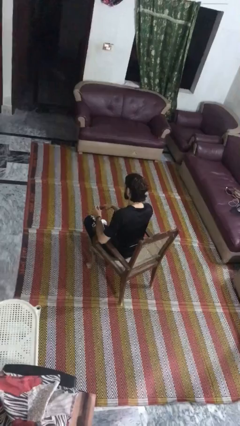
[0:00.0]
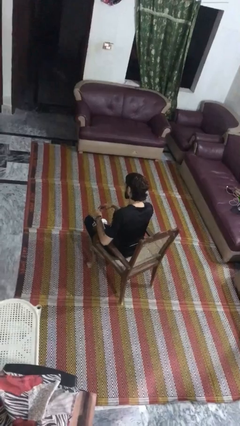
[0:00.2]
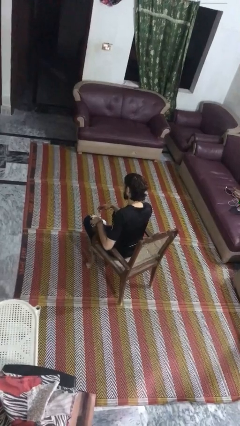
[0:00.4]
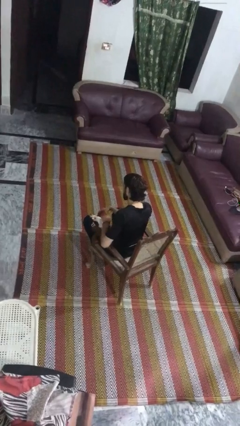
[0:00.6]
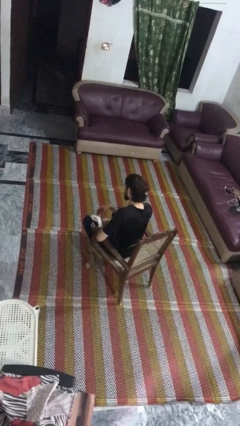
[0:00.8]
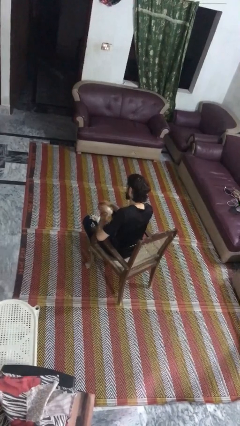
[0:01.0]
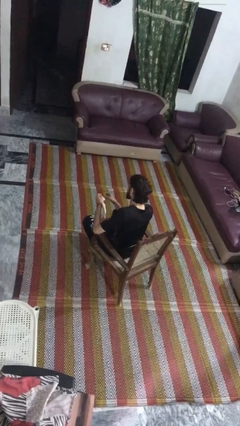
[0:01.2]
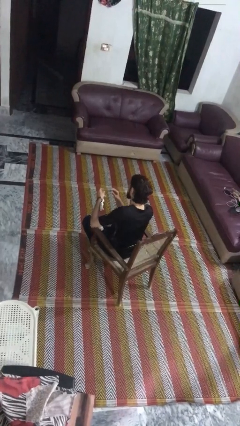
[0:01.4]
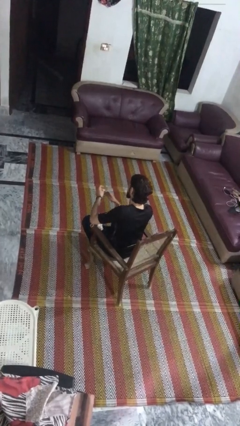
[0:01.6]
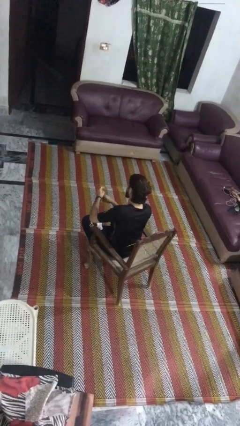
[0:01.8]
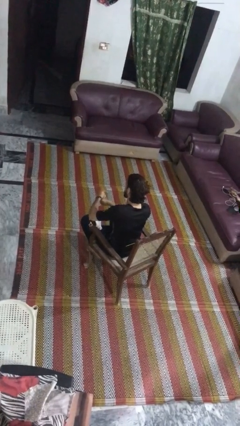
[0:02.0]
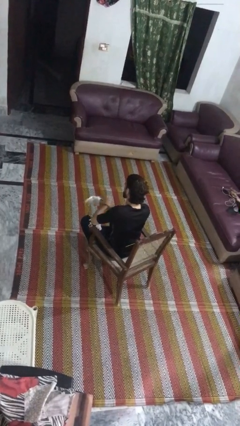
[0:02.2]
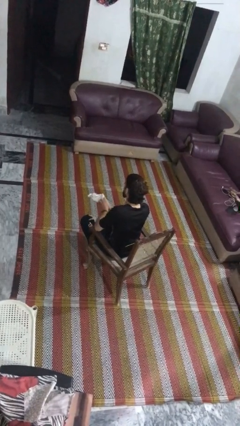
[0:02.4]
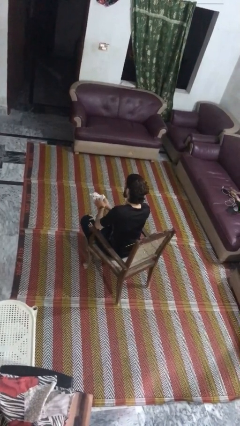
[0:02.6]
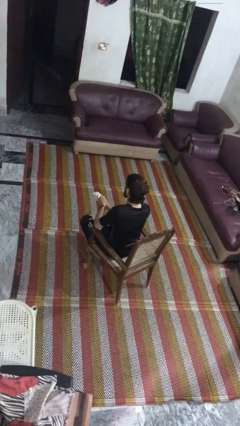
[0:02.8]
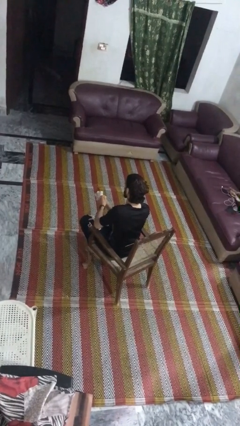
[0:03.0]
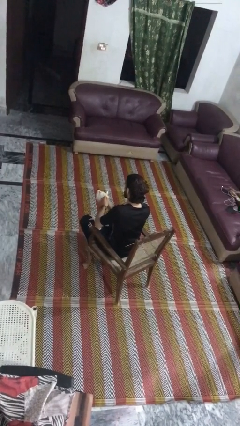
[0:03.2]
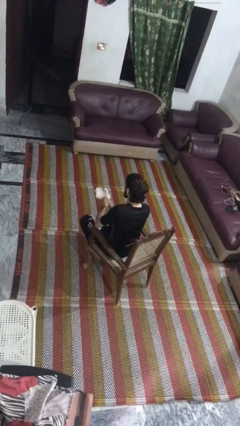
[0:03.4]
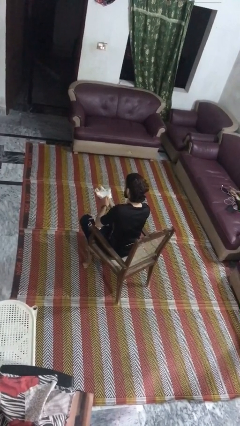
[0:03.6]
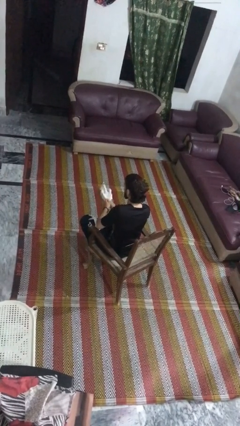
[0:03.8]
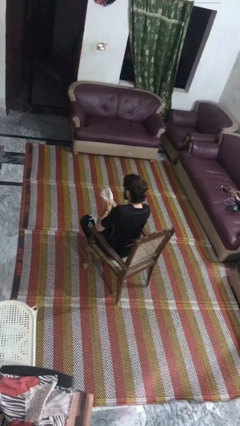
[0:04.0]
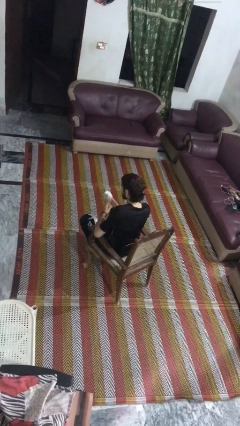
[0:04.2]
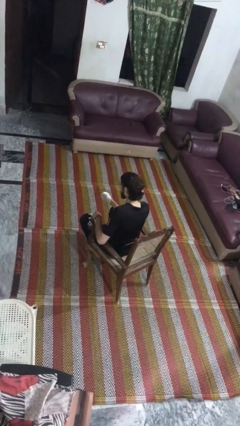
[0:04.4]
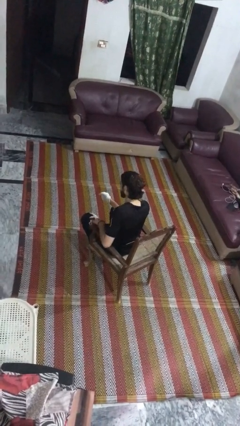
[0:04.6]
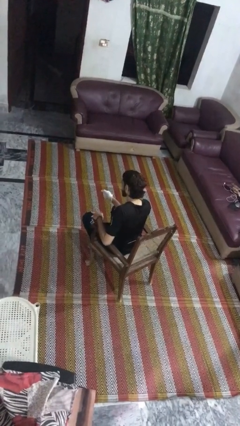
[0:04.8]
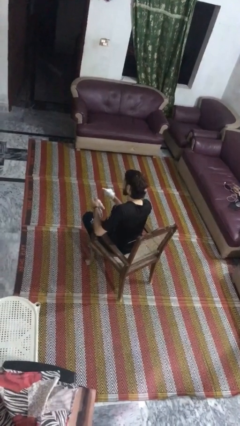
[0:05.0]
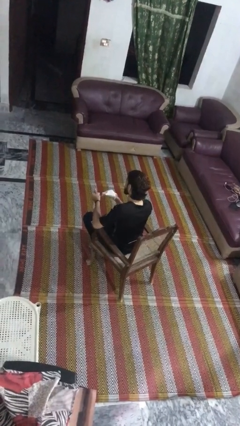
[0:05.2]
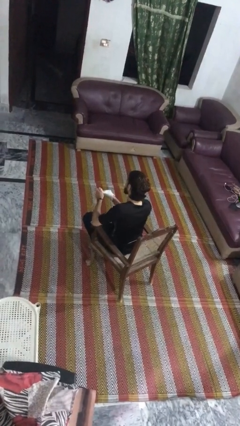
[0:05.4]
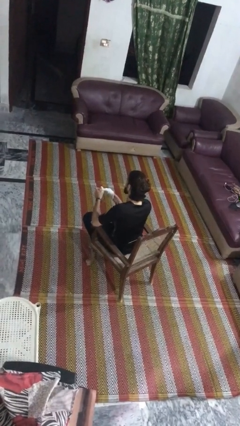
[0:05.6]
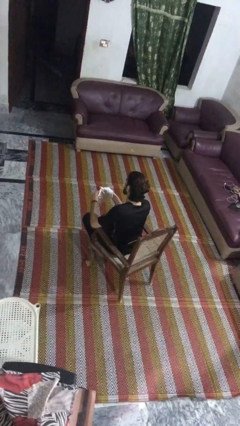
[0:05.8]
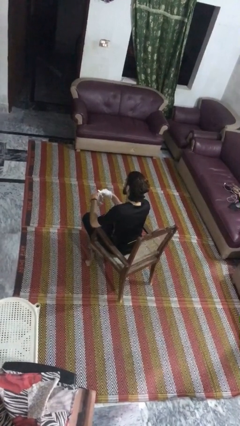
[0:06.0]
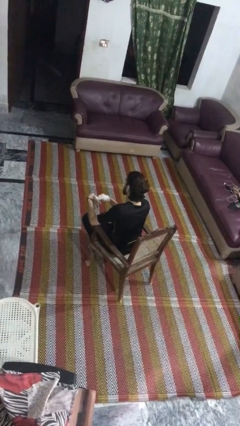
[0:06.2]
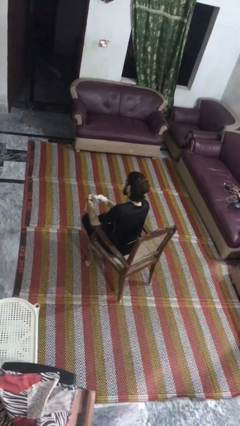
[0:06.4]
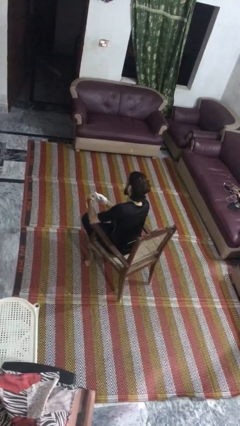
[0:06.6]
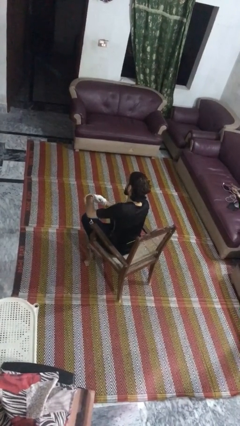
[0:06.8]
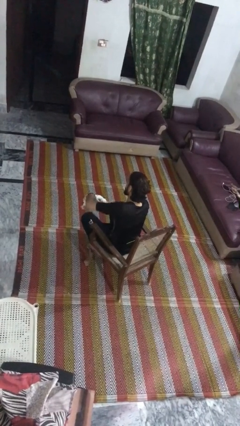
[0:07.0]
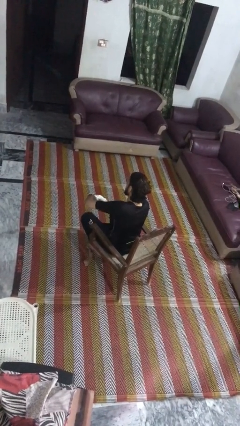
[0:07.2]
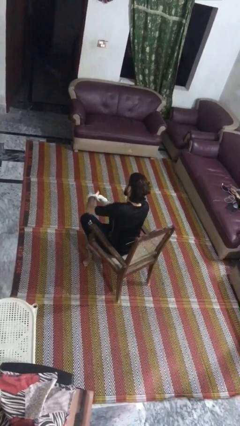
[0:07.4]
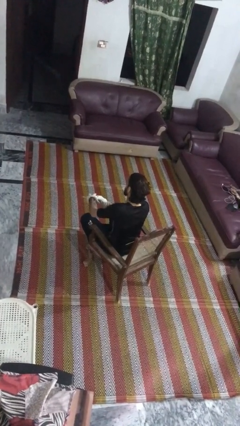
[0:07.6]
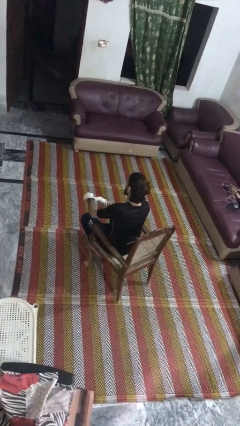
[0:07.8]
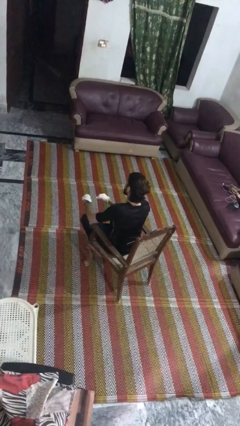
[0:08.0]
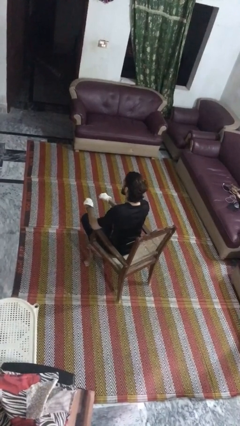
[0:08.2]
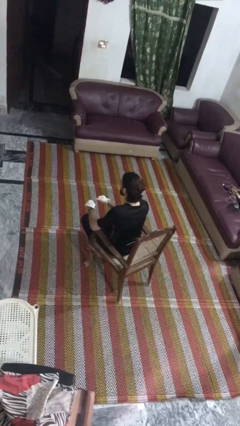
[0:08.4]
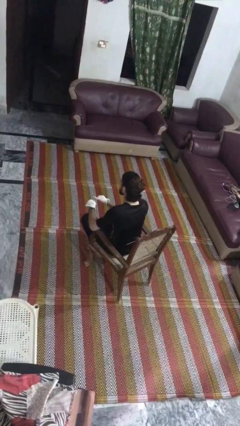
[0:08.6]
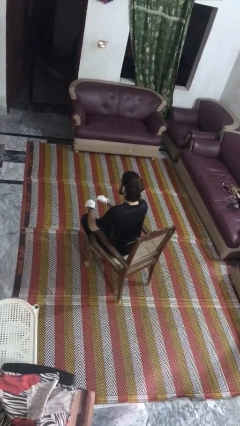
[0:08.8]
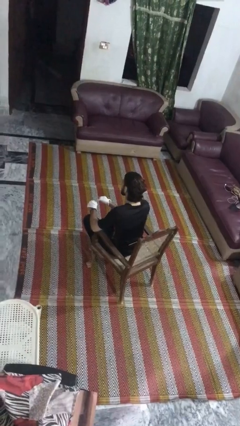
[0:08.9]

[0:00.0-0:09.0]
person puts on gloves

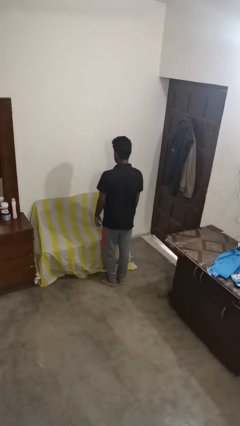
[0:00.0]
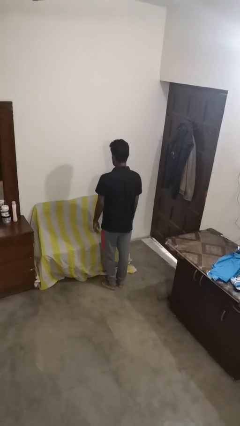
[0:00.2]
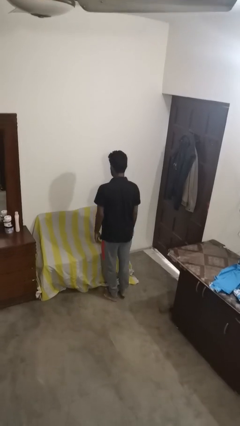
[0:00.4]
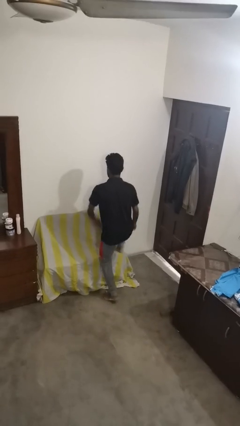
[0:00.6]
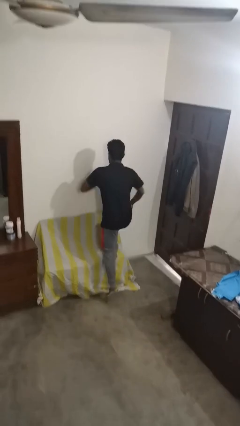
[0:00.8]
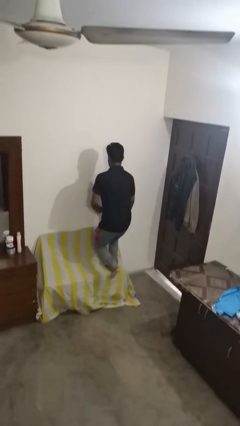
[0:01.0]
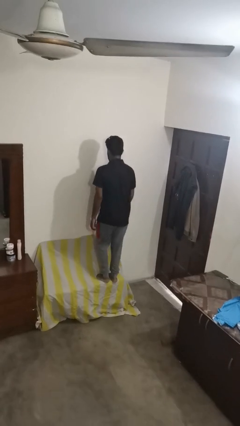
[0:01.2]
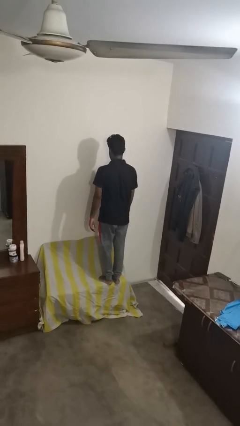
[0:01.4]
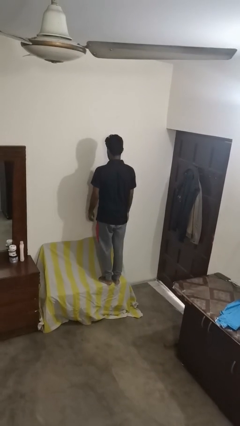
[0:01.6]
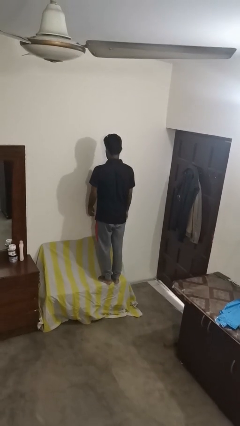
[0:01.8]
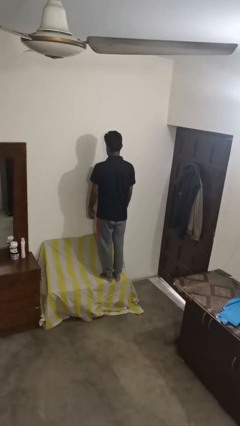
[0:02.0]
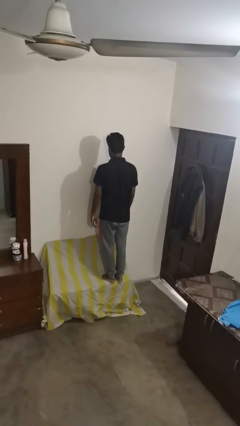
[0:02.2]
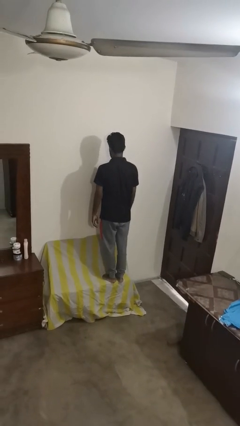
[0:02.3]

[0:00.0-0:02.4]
person jumps on couch

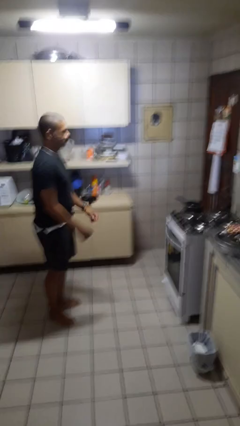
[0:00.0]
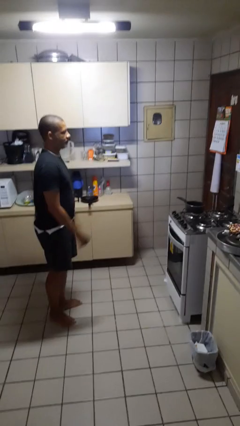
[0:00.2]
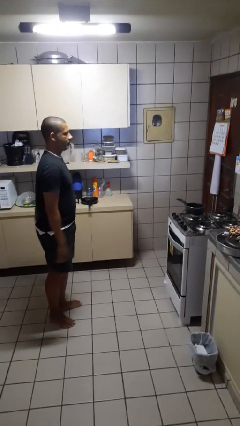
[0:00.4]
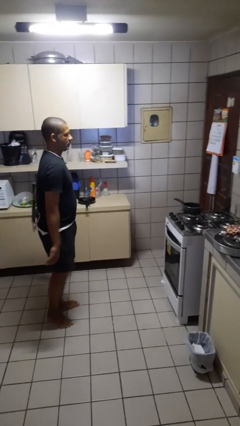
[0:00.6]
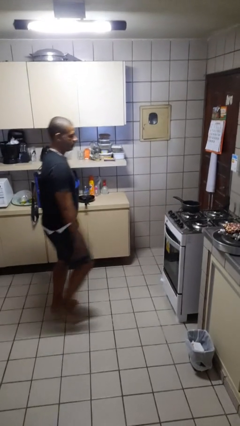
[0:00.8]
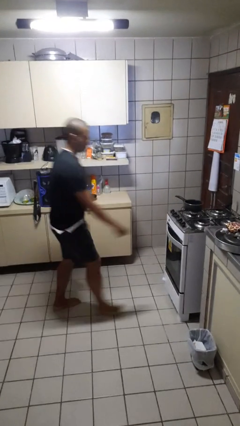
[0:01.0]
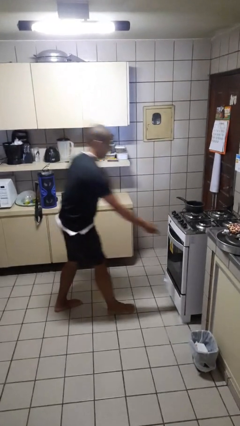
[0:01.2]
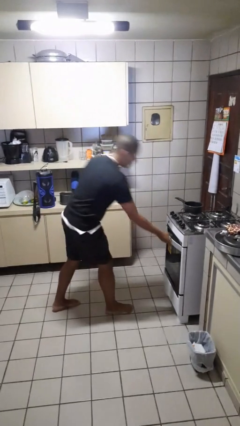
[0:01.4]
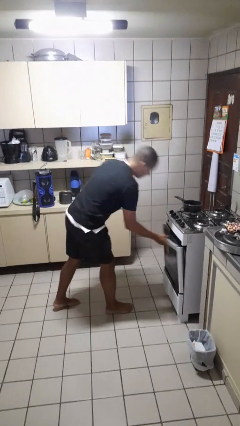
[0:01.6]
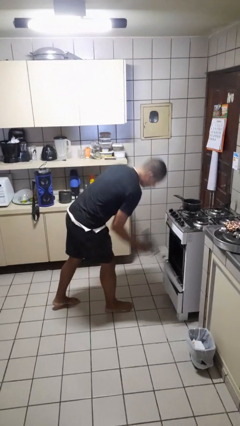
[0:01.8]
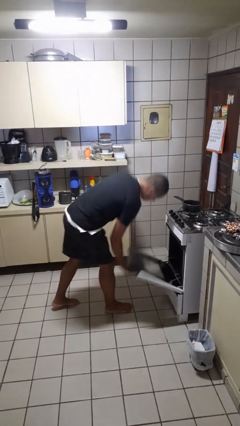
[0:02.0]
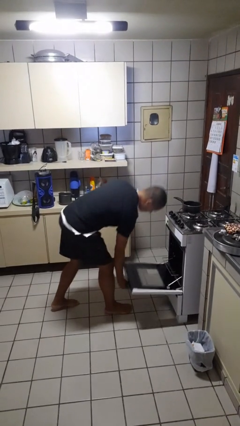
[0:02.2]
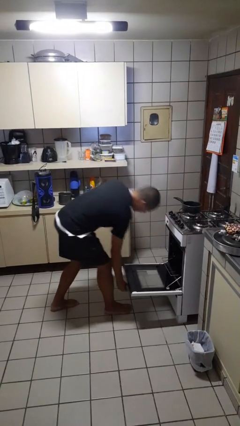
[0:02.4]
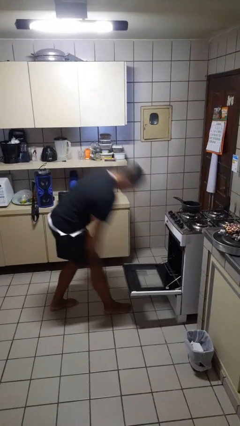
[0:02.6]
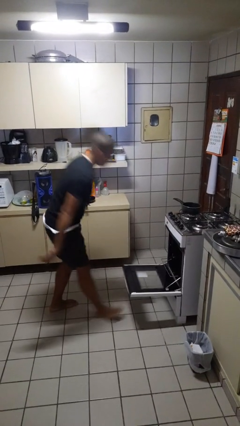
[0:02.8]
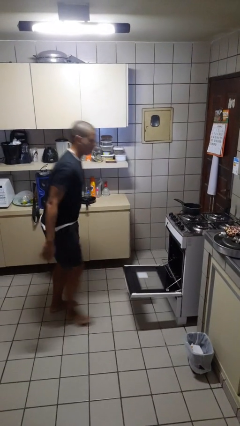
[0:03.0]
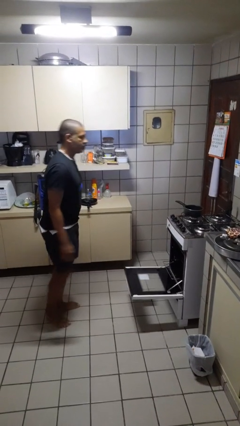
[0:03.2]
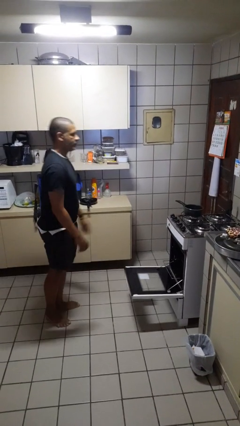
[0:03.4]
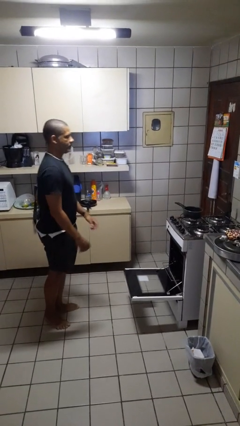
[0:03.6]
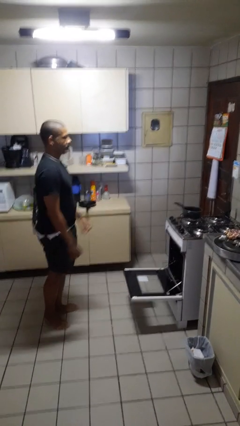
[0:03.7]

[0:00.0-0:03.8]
person opens oven door

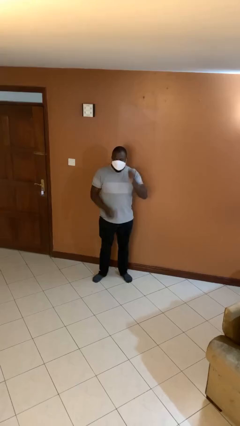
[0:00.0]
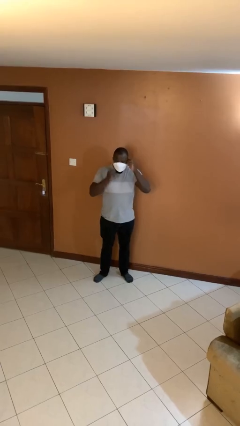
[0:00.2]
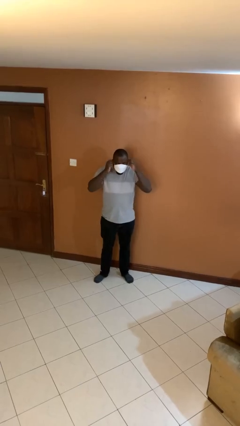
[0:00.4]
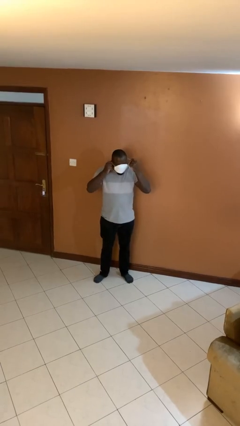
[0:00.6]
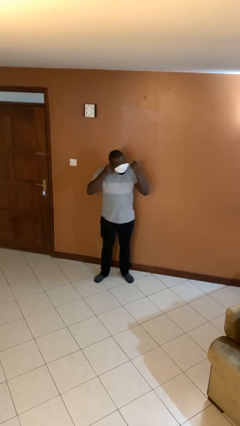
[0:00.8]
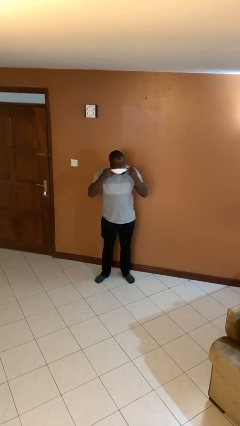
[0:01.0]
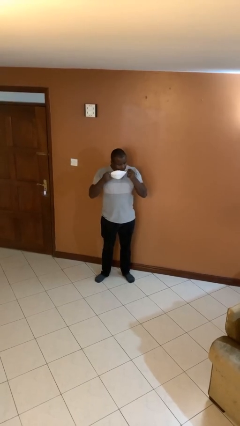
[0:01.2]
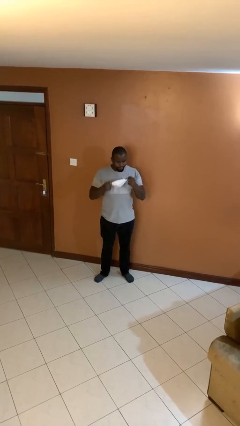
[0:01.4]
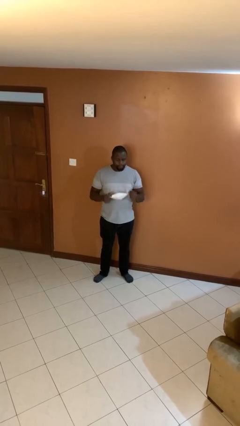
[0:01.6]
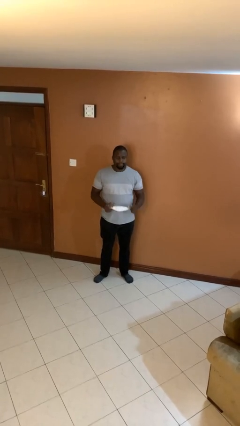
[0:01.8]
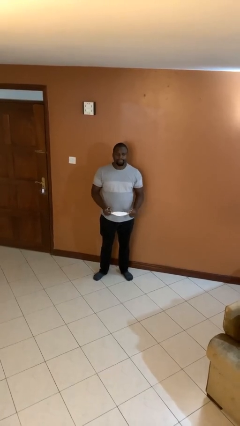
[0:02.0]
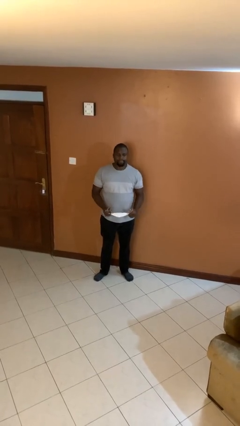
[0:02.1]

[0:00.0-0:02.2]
person takes off facemask

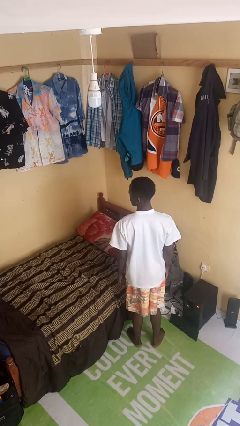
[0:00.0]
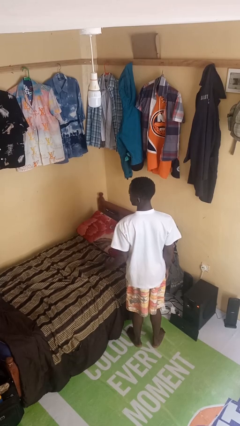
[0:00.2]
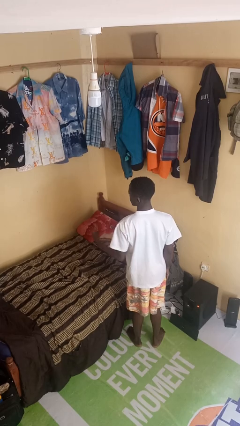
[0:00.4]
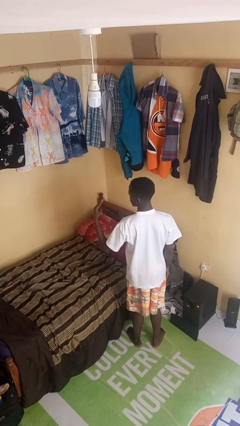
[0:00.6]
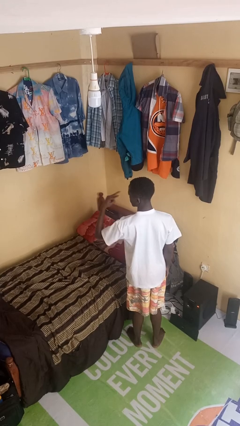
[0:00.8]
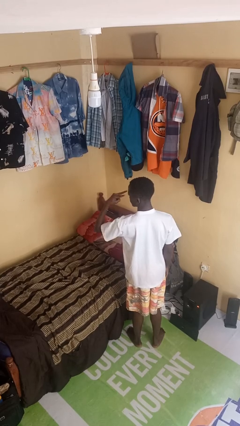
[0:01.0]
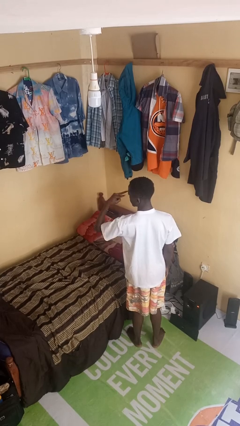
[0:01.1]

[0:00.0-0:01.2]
person gestures watch closely
